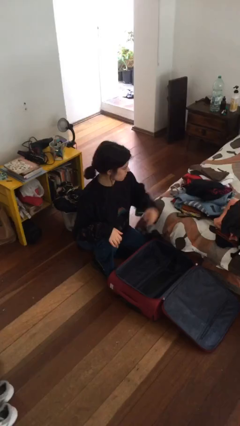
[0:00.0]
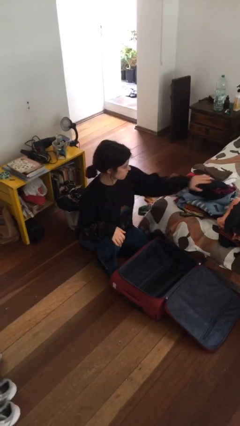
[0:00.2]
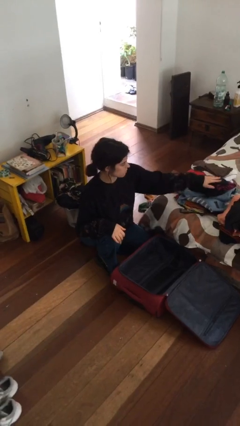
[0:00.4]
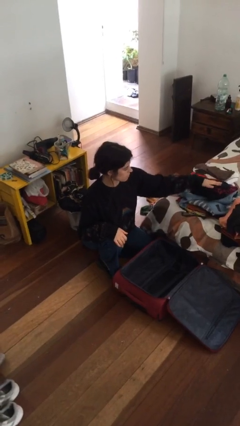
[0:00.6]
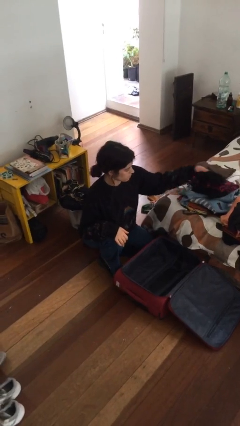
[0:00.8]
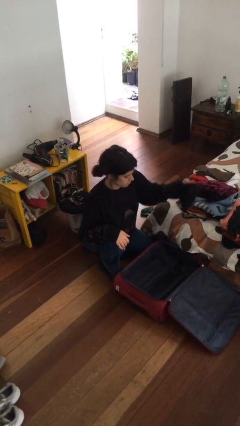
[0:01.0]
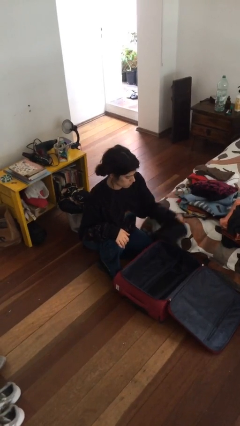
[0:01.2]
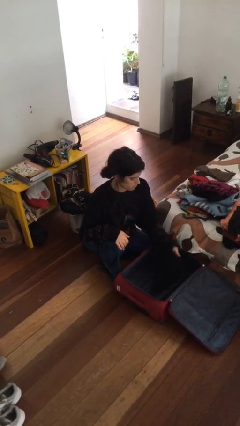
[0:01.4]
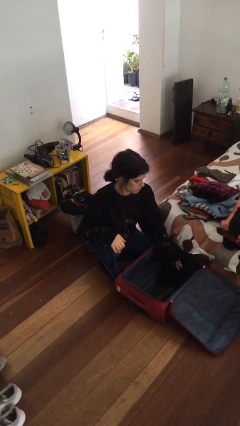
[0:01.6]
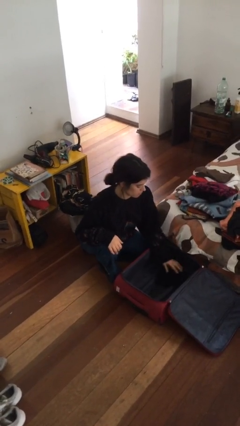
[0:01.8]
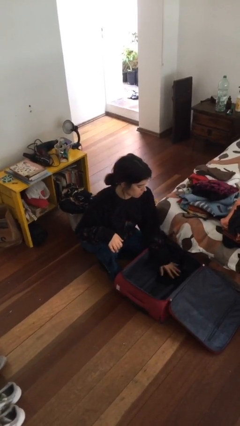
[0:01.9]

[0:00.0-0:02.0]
person loads clothes into suitcase

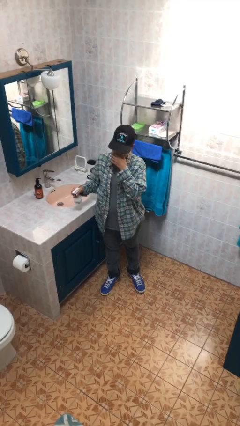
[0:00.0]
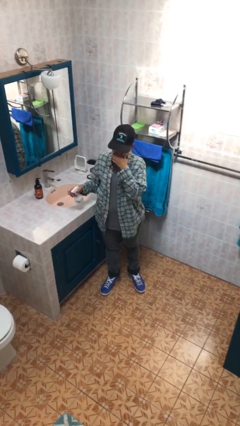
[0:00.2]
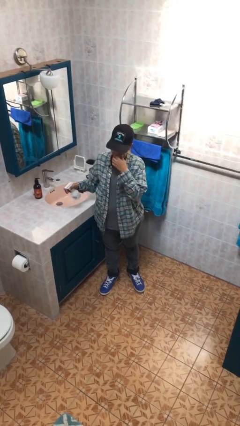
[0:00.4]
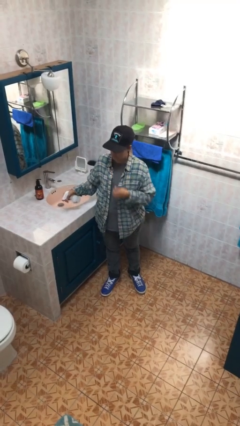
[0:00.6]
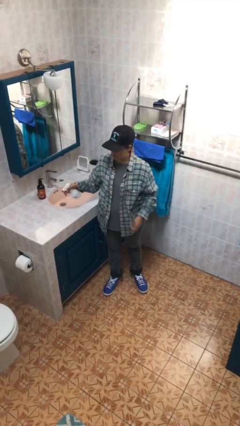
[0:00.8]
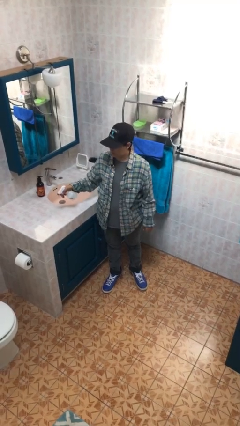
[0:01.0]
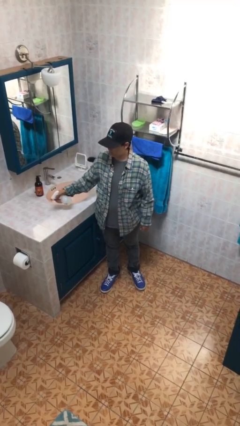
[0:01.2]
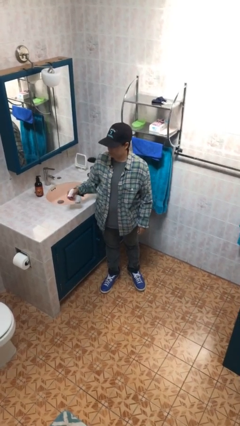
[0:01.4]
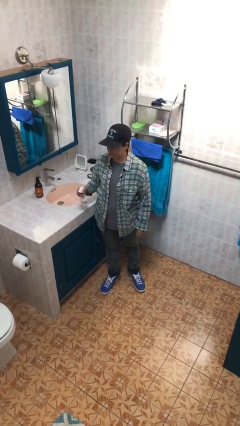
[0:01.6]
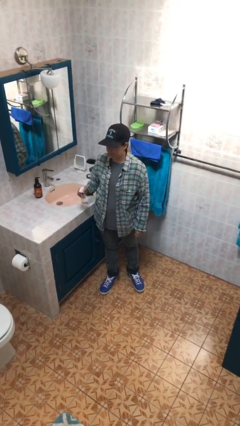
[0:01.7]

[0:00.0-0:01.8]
person sprays from bottle

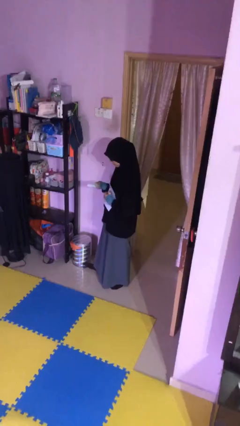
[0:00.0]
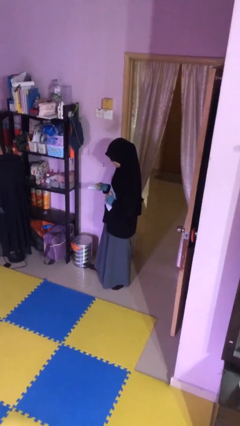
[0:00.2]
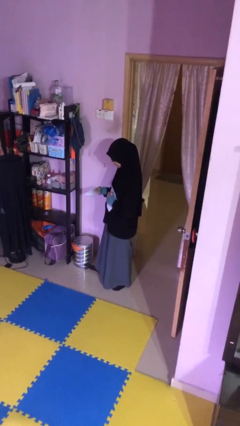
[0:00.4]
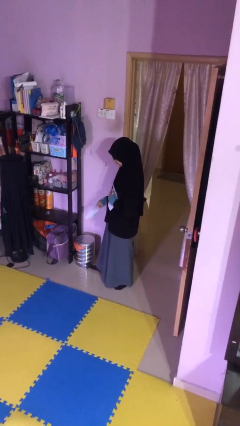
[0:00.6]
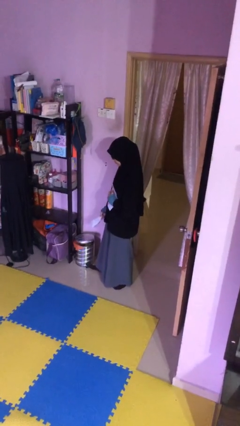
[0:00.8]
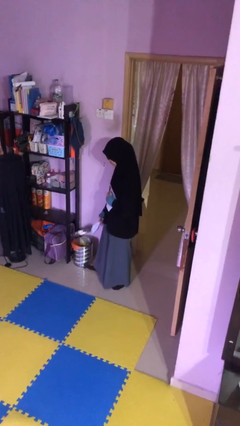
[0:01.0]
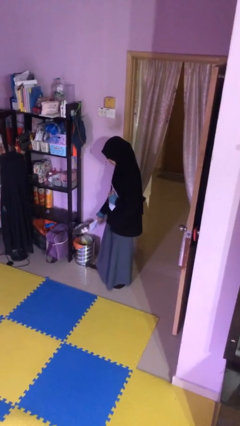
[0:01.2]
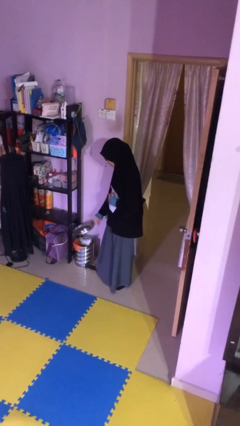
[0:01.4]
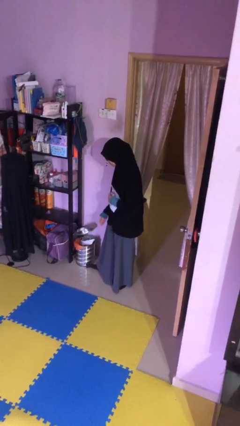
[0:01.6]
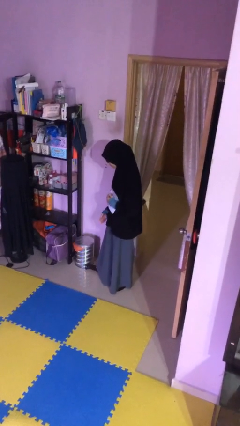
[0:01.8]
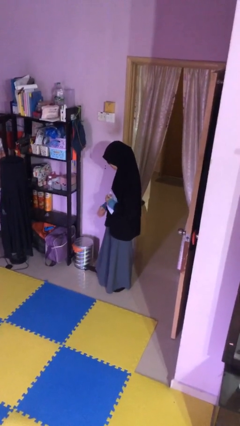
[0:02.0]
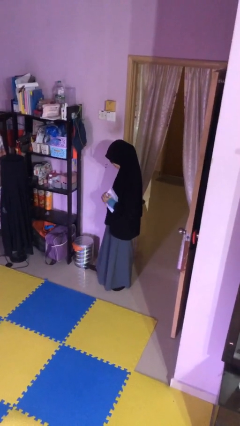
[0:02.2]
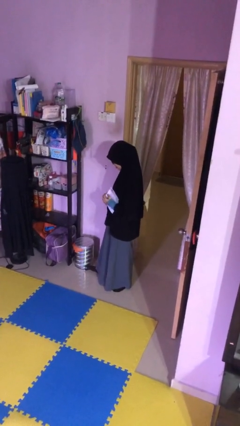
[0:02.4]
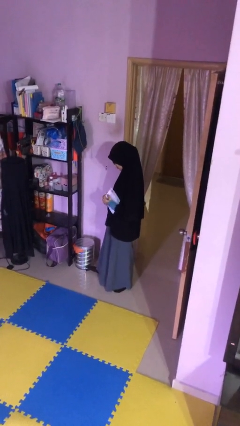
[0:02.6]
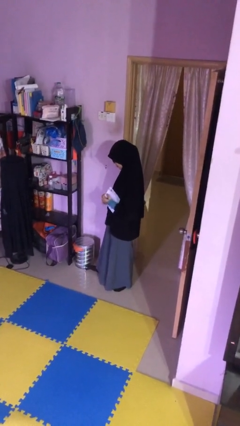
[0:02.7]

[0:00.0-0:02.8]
person discards trash

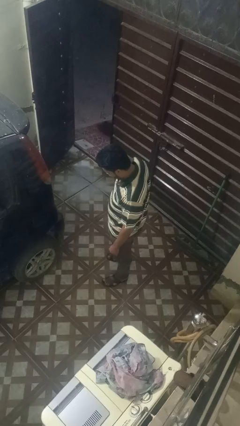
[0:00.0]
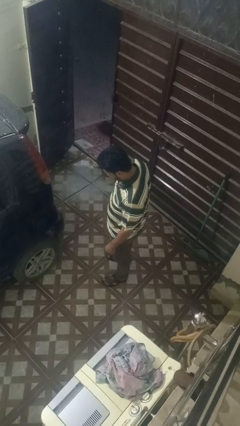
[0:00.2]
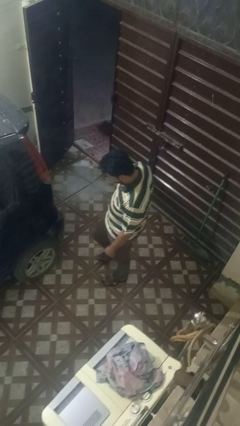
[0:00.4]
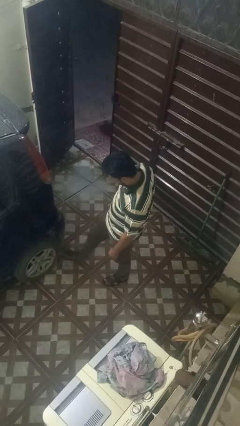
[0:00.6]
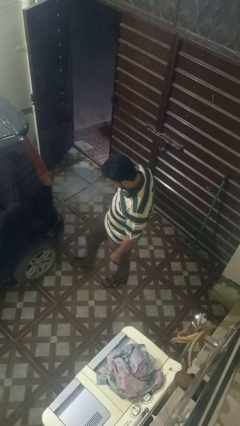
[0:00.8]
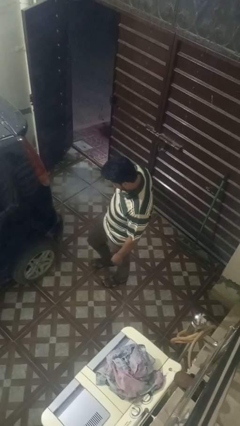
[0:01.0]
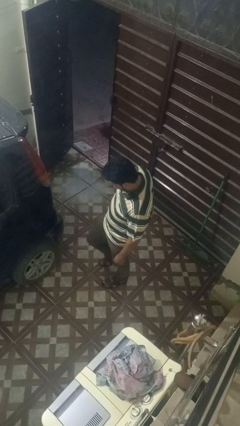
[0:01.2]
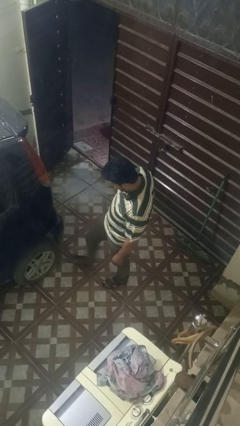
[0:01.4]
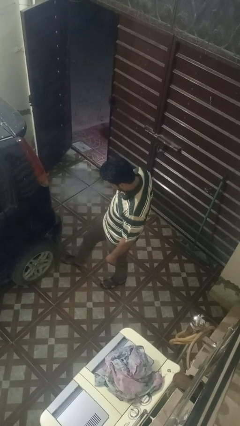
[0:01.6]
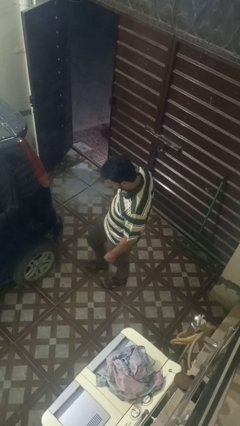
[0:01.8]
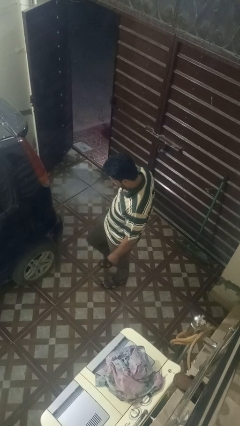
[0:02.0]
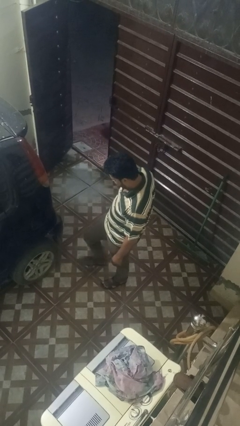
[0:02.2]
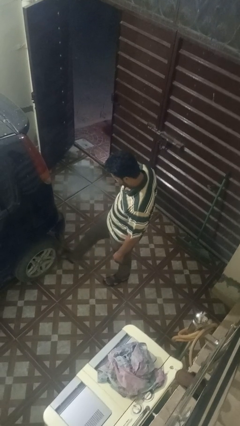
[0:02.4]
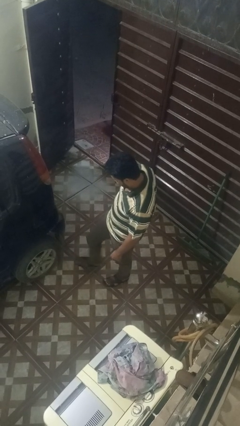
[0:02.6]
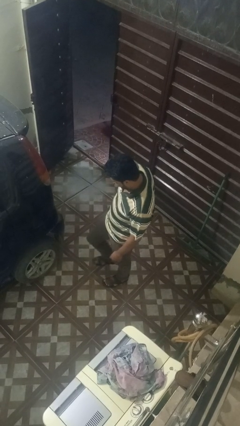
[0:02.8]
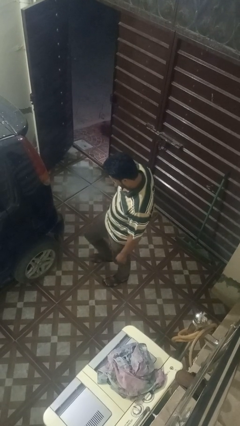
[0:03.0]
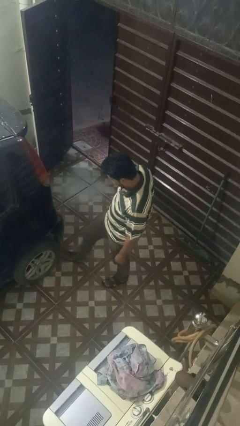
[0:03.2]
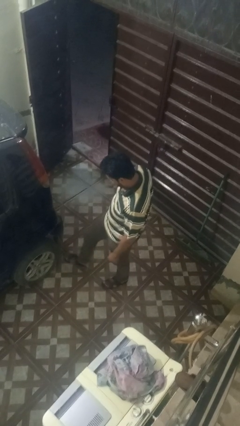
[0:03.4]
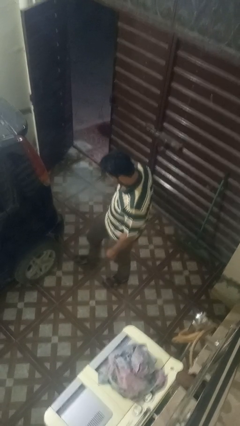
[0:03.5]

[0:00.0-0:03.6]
person kicks car tires

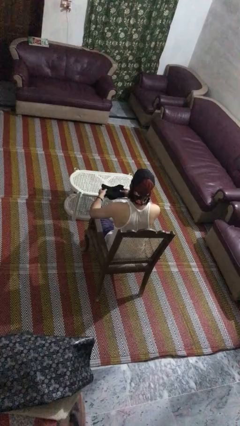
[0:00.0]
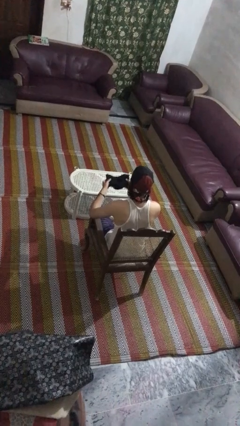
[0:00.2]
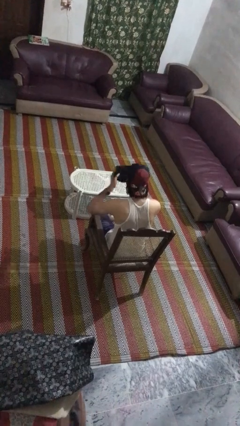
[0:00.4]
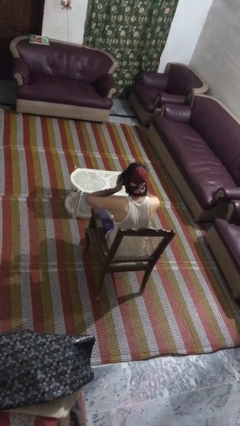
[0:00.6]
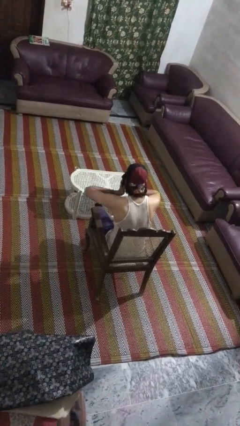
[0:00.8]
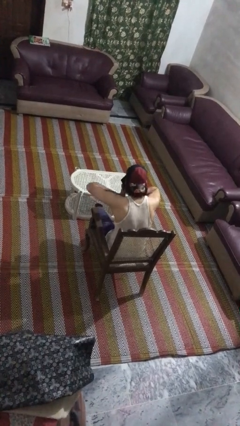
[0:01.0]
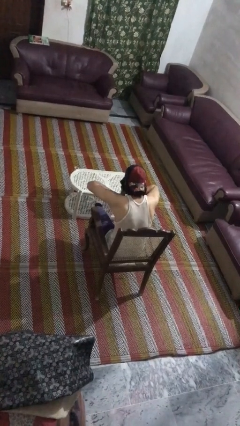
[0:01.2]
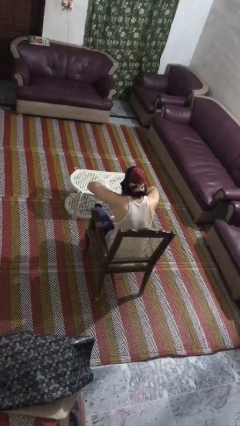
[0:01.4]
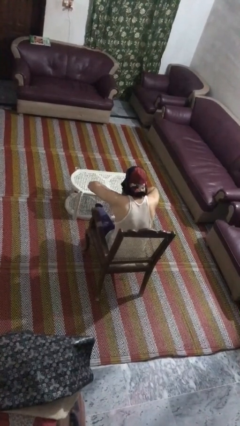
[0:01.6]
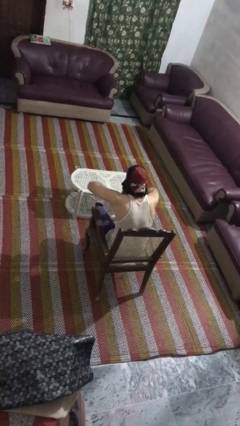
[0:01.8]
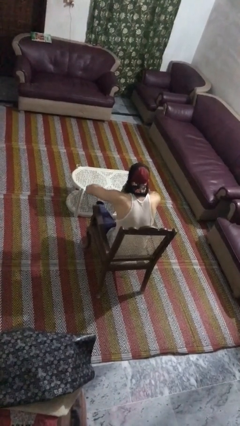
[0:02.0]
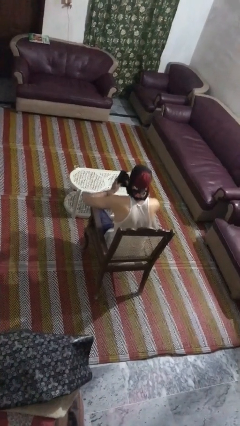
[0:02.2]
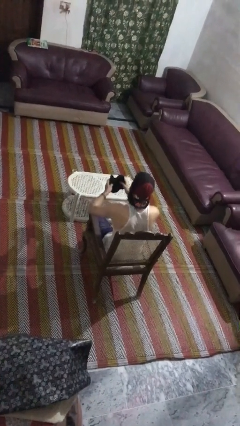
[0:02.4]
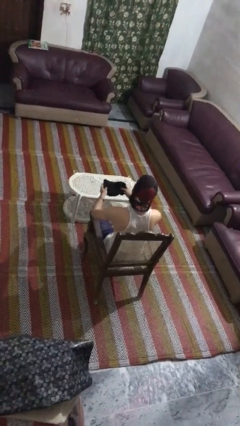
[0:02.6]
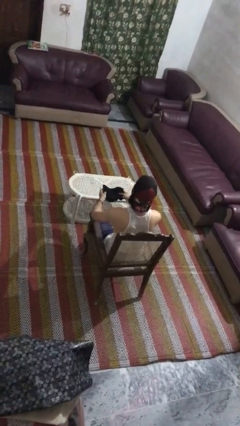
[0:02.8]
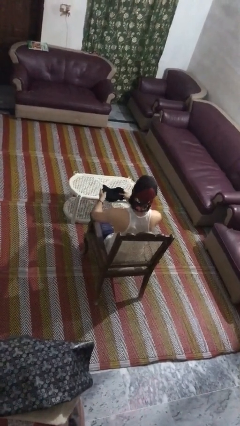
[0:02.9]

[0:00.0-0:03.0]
person blows nose

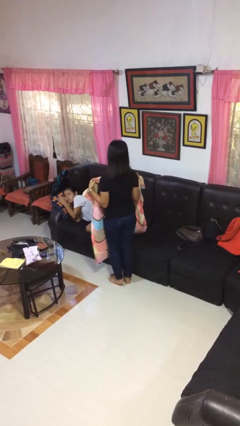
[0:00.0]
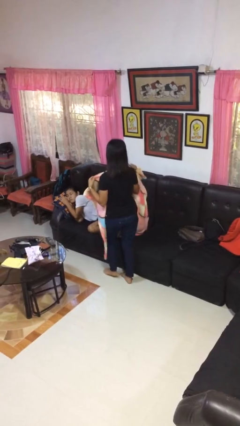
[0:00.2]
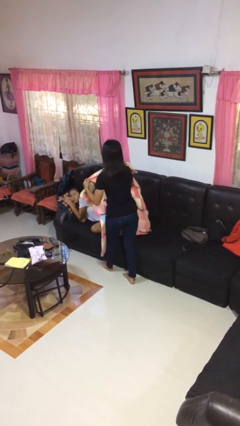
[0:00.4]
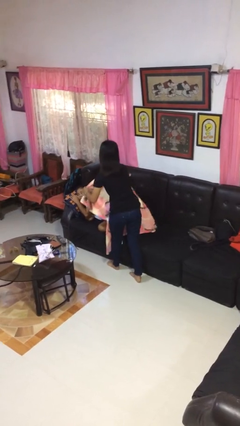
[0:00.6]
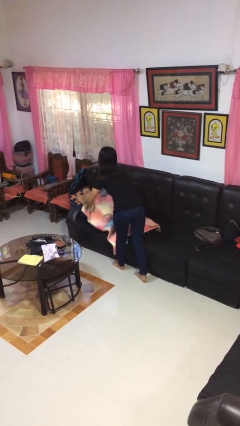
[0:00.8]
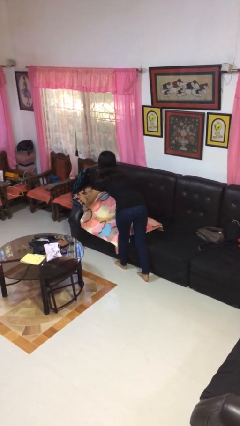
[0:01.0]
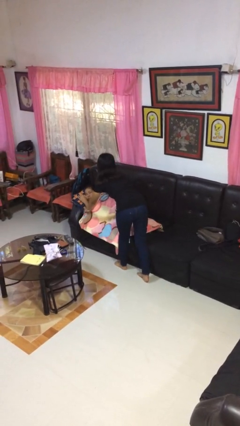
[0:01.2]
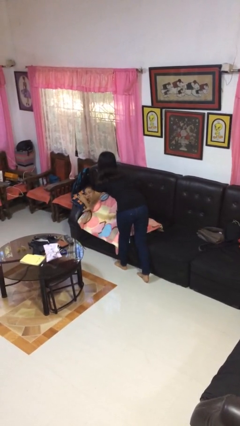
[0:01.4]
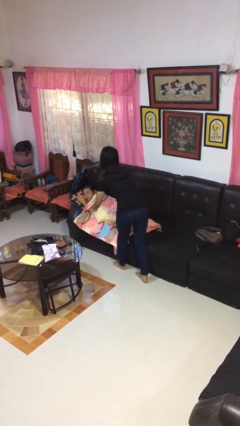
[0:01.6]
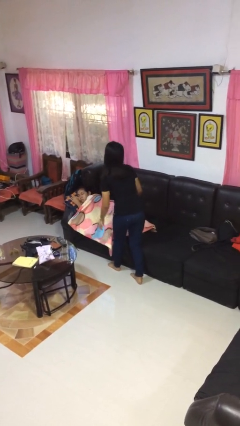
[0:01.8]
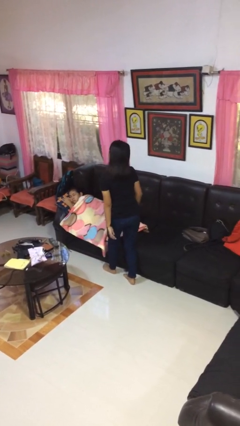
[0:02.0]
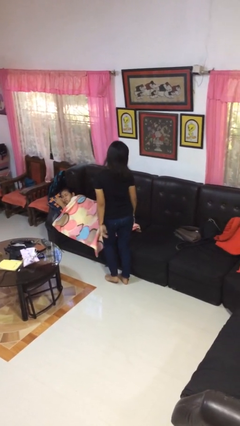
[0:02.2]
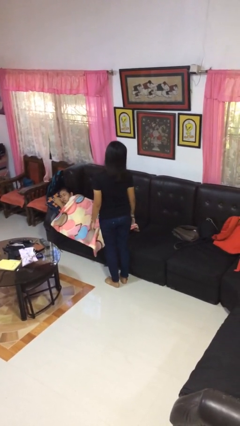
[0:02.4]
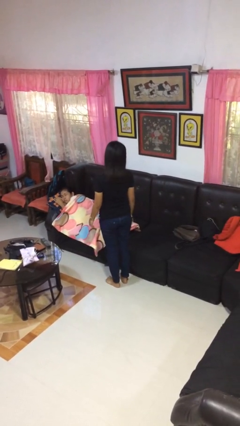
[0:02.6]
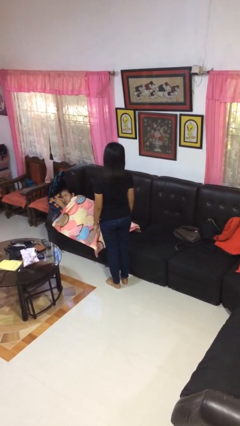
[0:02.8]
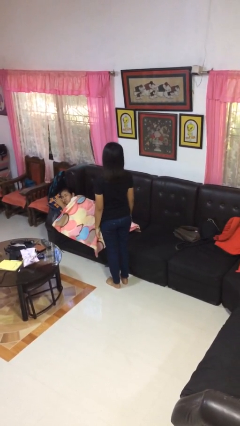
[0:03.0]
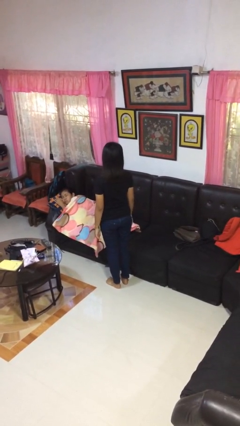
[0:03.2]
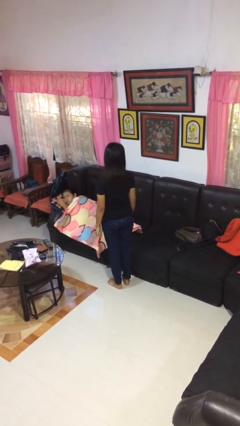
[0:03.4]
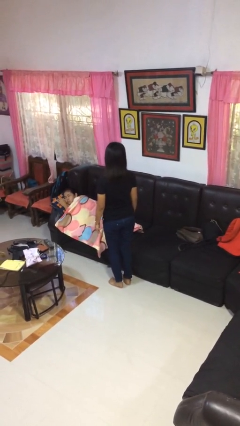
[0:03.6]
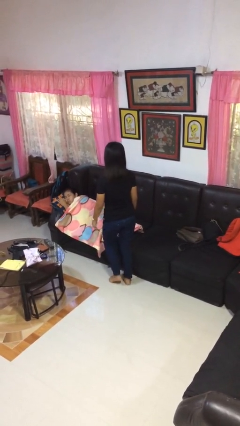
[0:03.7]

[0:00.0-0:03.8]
person covers friend with blanket
